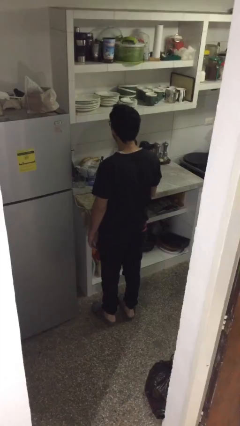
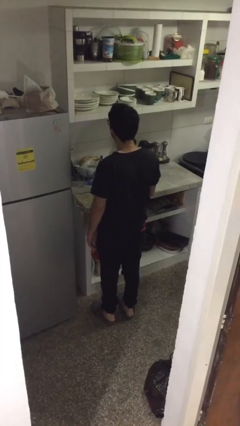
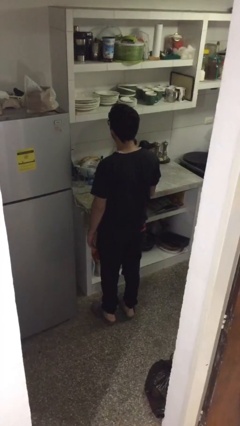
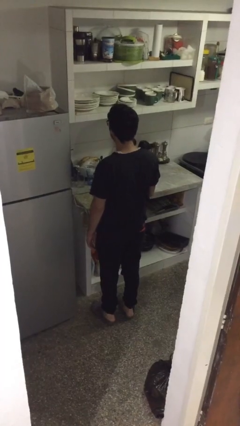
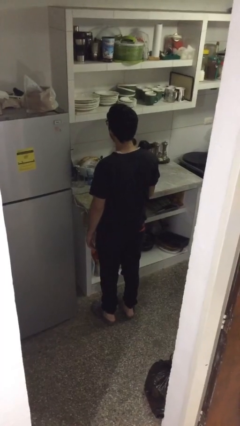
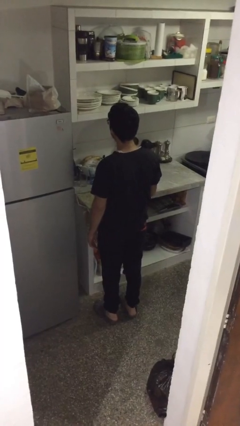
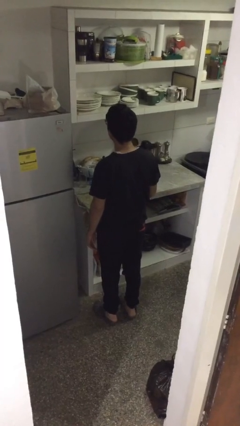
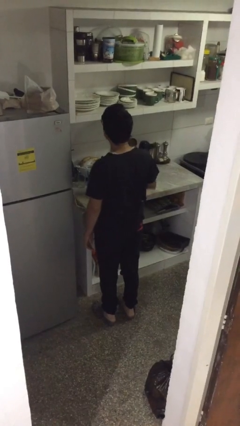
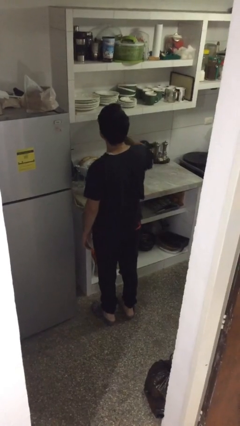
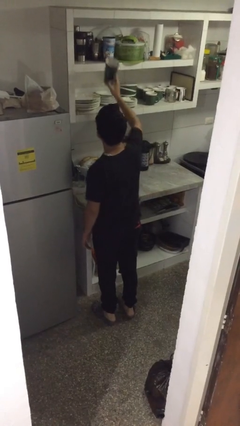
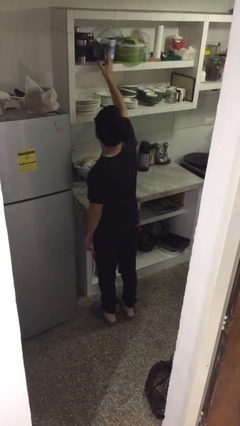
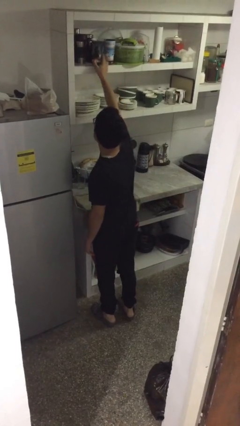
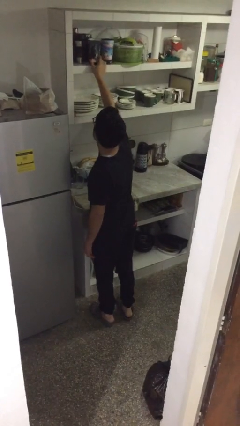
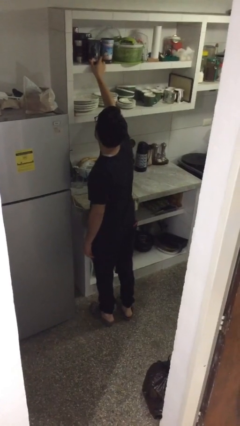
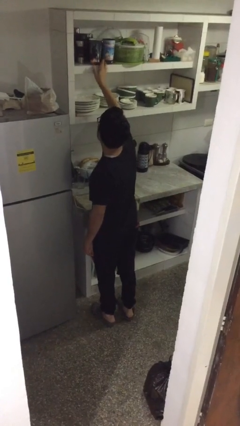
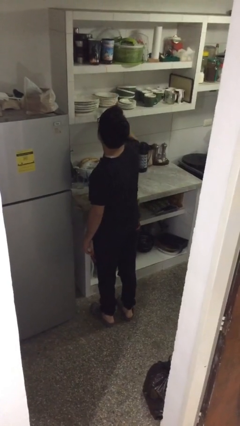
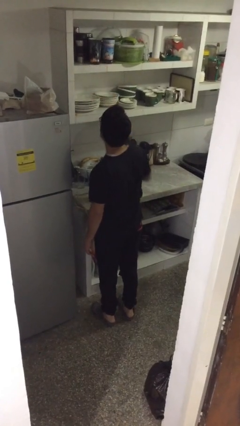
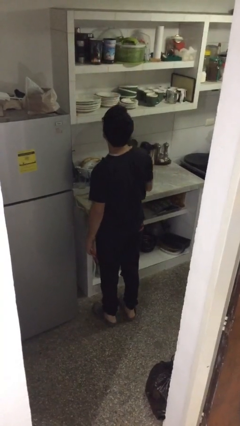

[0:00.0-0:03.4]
person puts down object on shelf

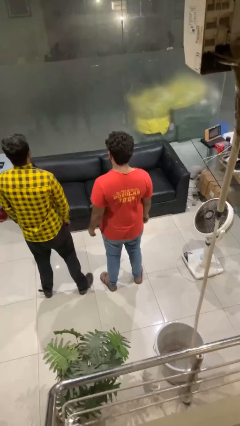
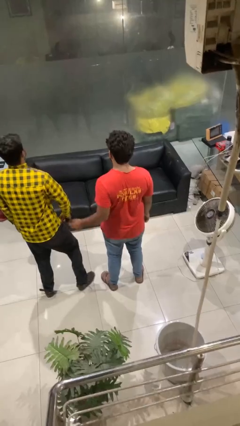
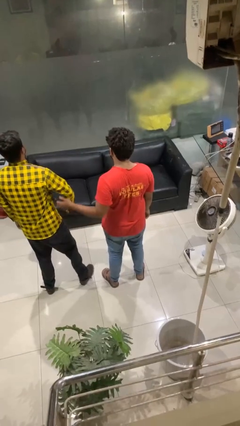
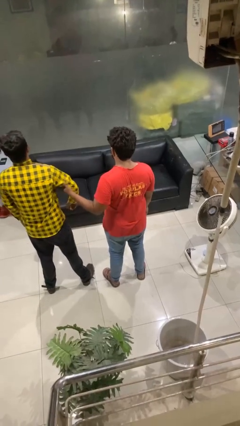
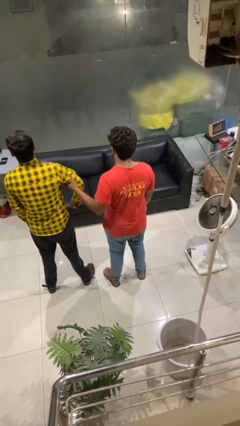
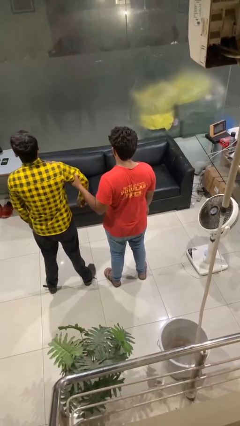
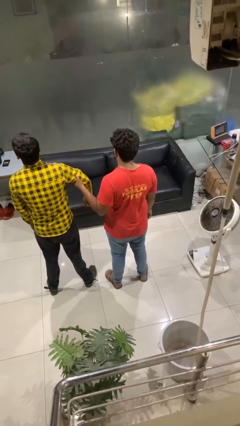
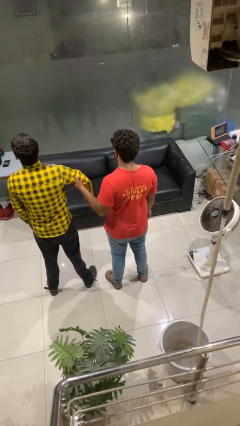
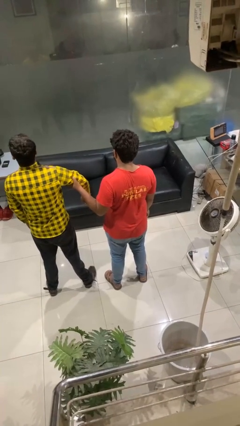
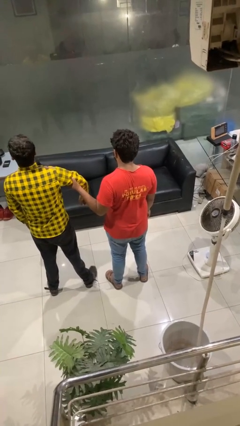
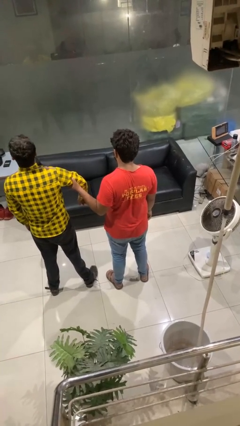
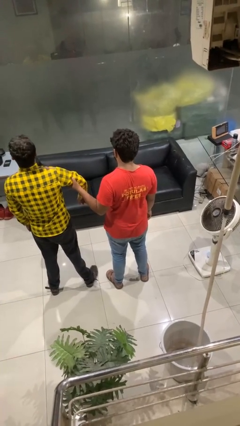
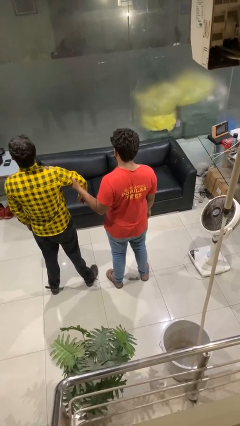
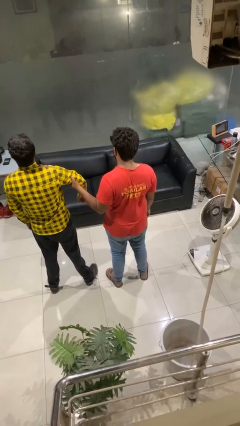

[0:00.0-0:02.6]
person grabs person by bicep

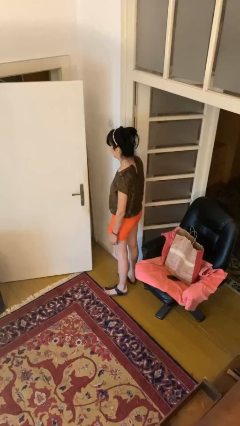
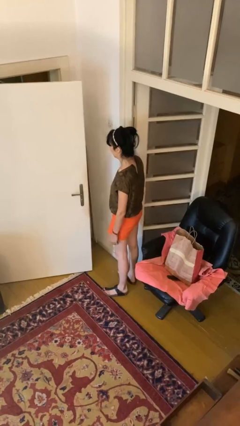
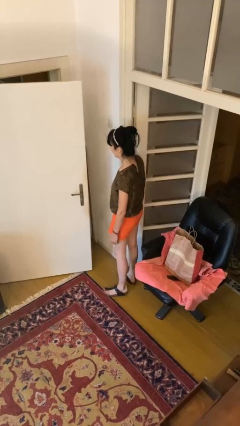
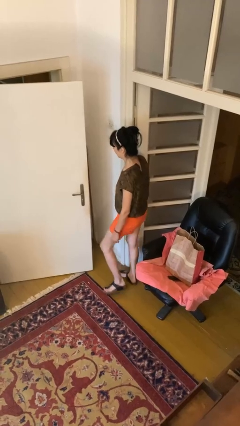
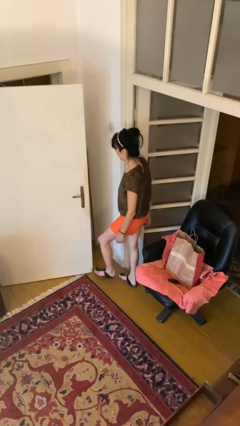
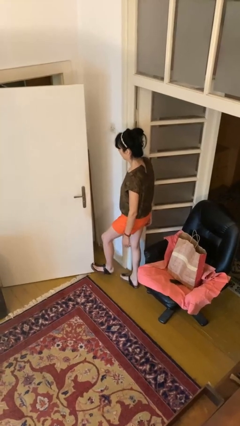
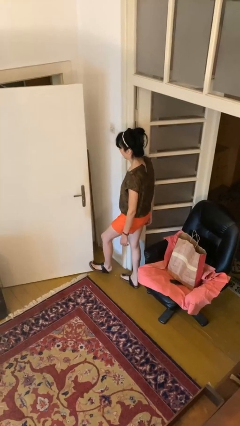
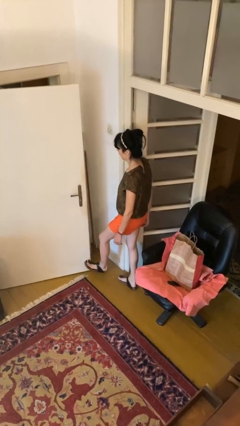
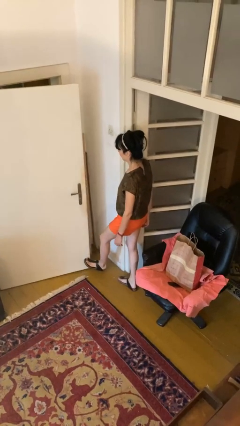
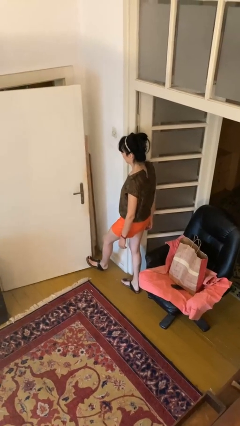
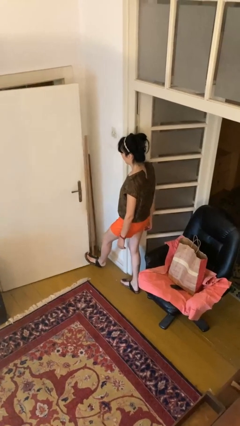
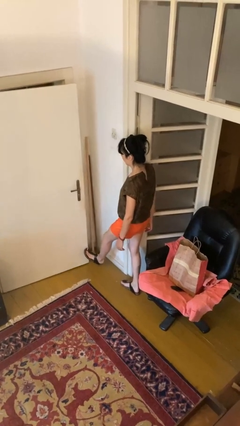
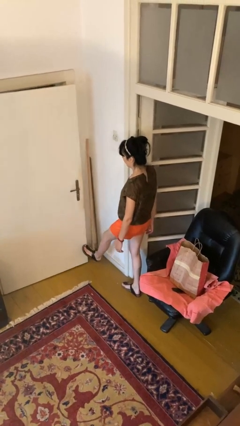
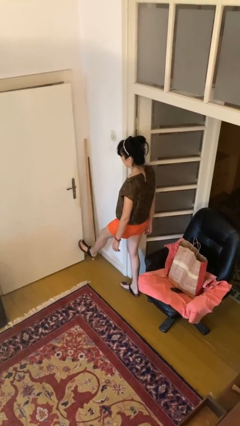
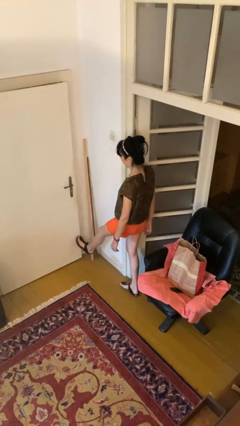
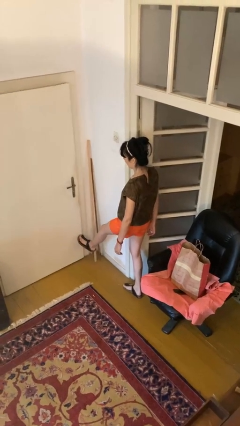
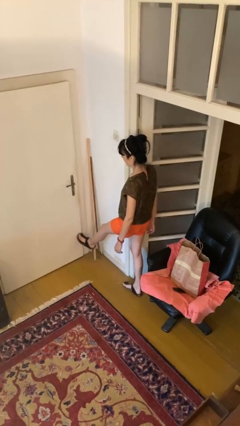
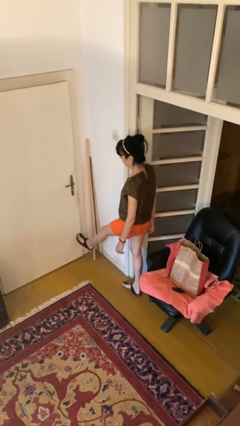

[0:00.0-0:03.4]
person closes door with foot

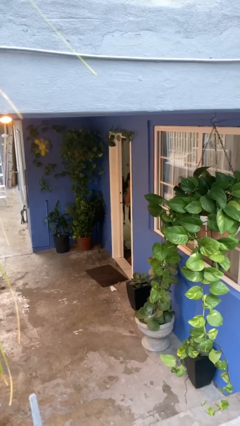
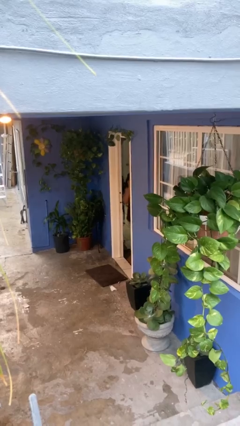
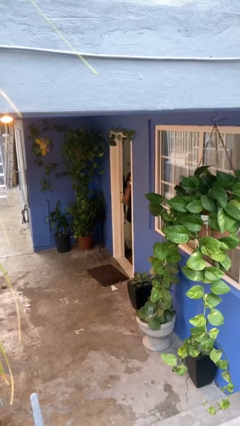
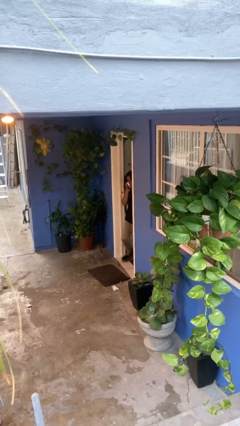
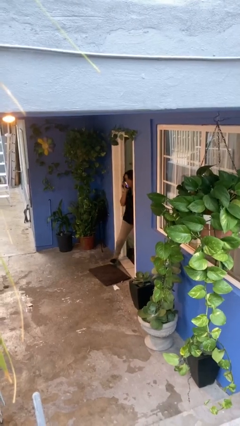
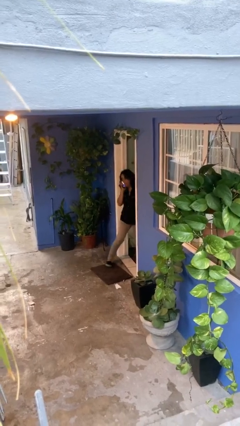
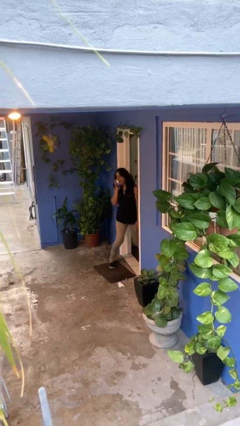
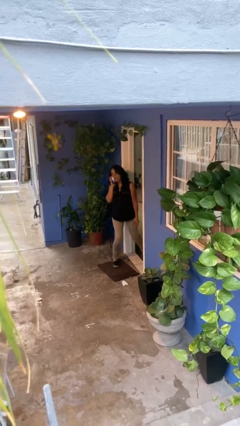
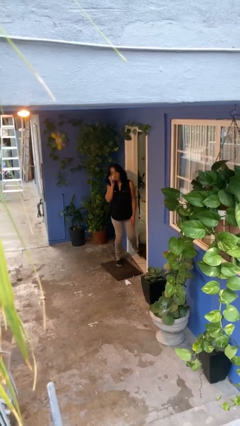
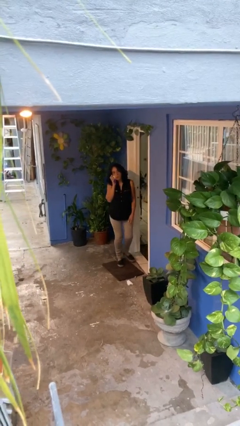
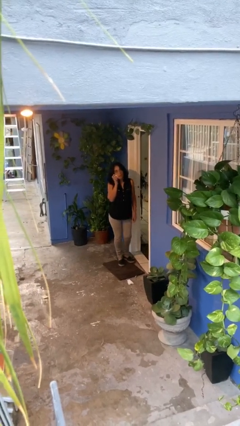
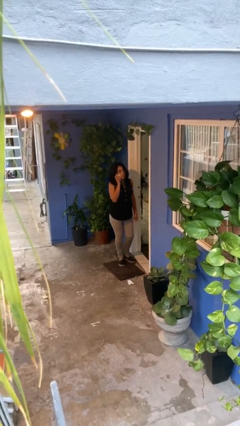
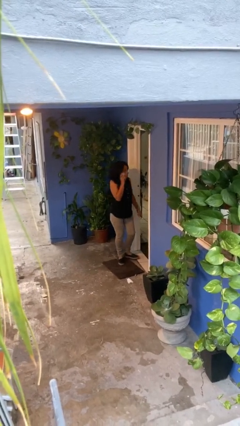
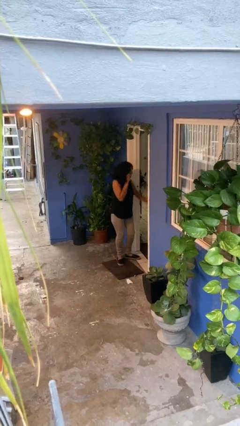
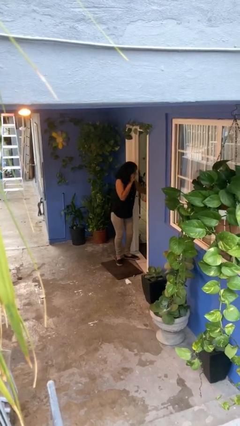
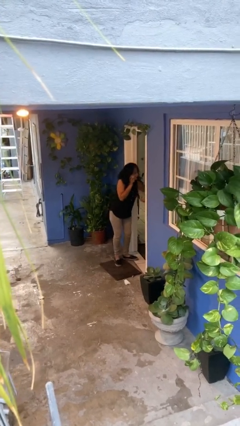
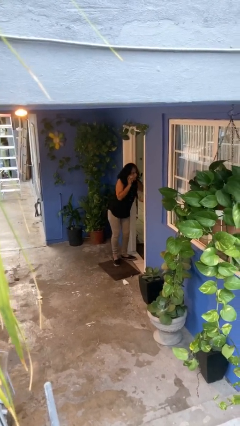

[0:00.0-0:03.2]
person enters scene through structure

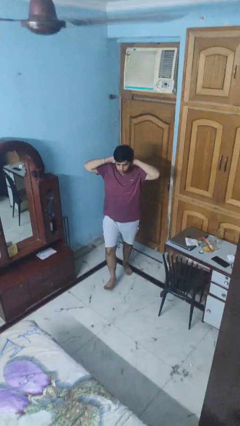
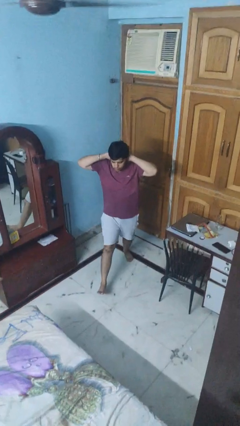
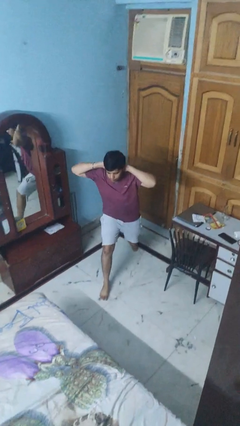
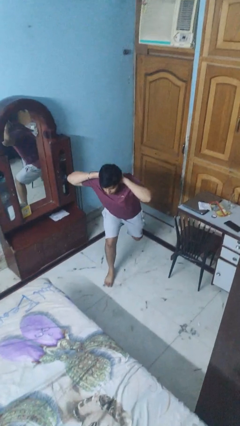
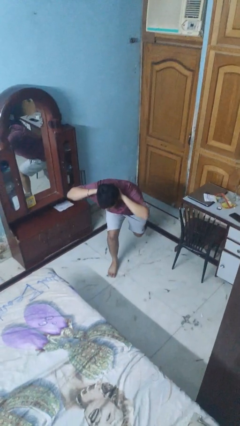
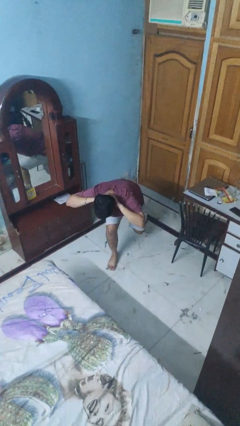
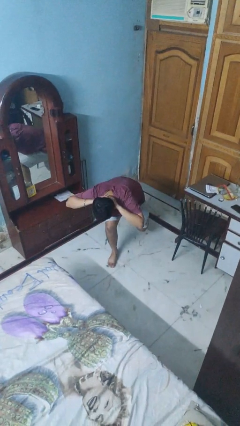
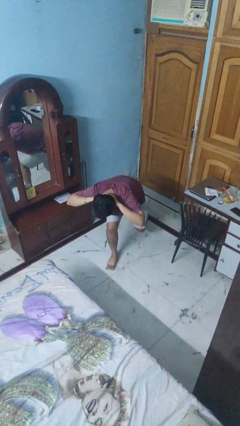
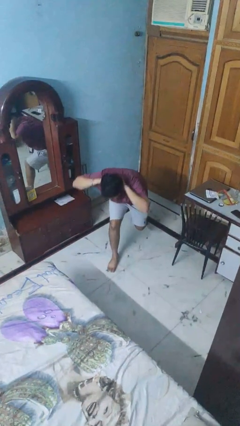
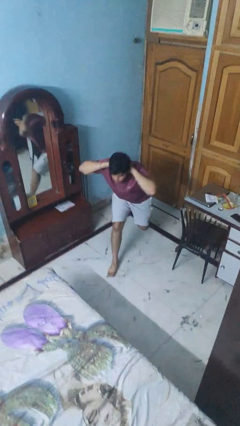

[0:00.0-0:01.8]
person exercises with lunges

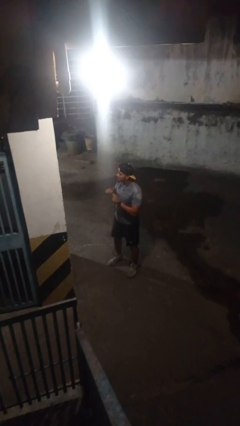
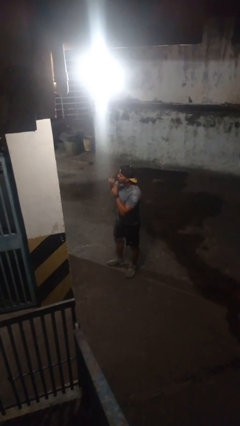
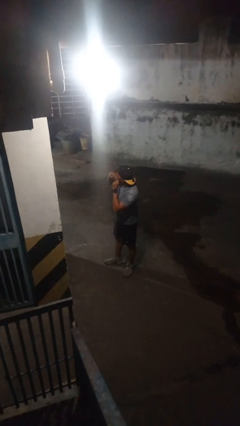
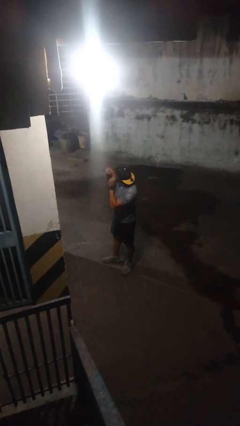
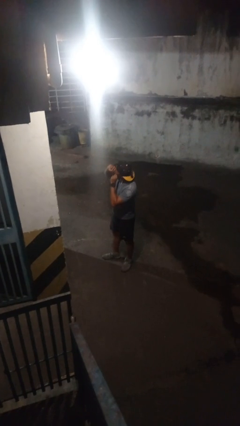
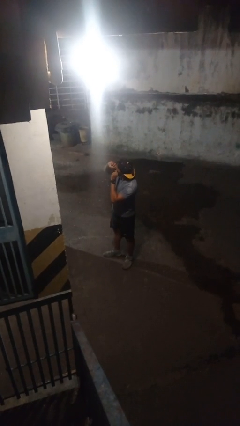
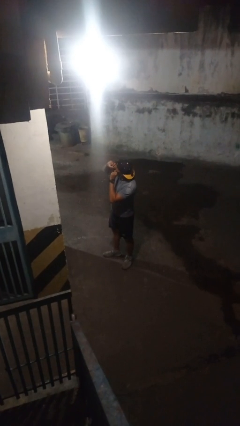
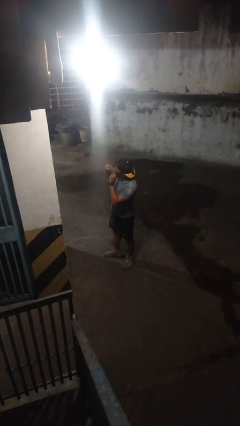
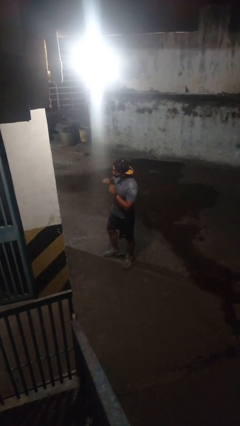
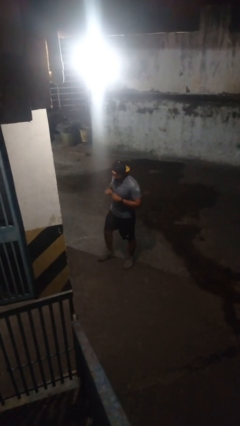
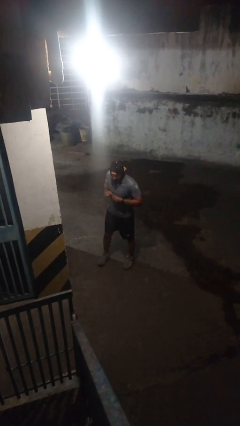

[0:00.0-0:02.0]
person flosses

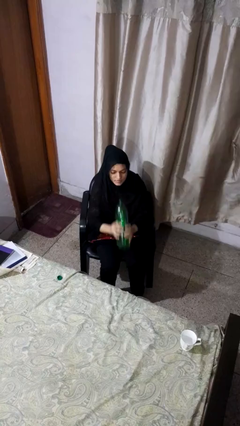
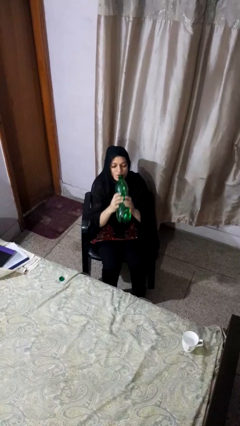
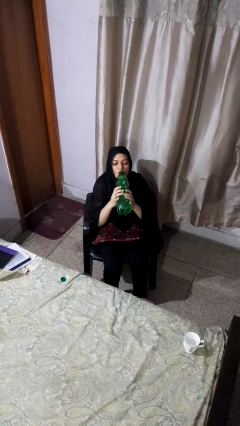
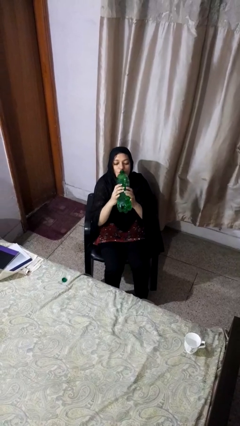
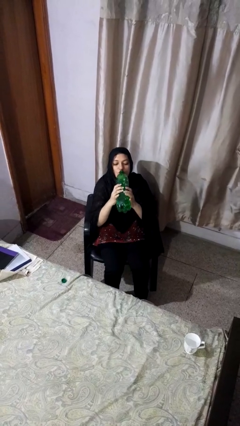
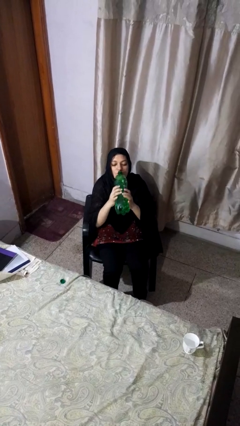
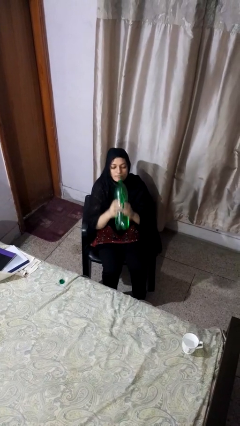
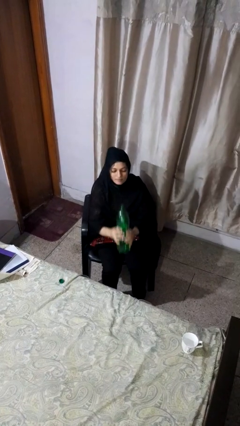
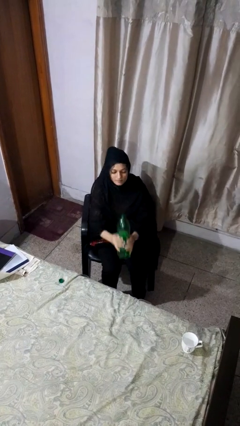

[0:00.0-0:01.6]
person drinks from bottle
